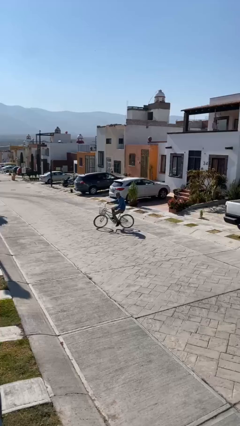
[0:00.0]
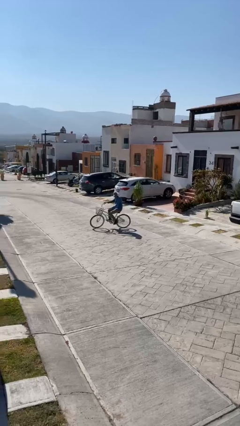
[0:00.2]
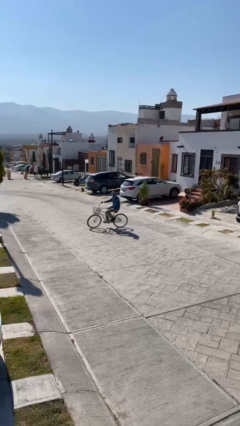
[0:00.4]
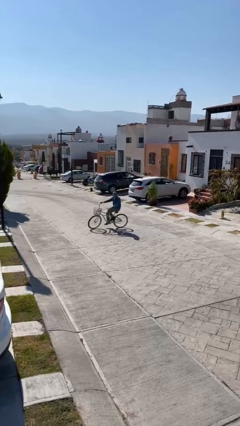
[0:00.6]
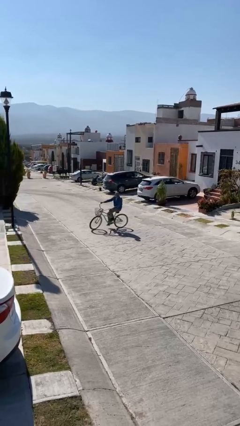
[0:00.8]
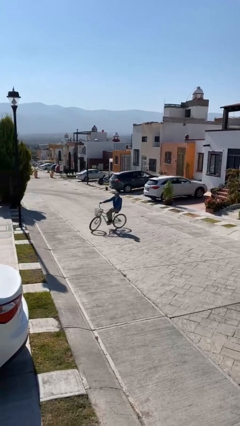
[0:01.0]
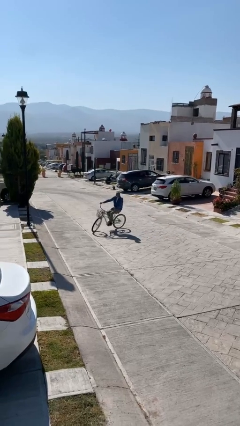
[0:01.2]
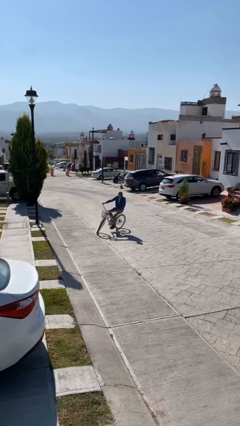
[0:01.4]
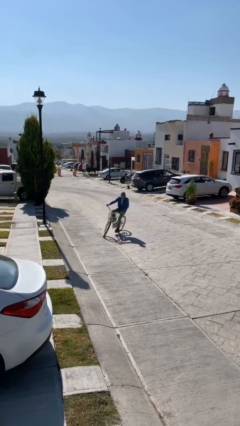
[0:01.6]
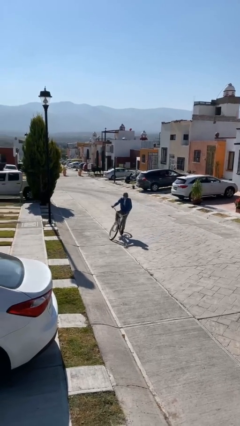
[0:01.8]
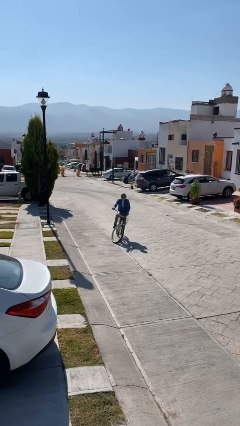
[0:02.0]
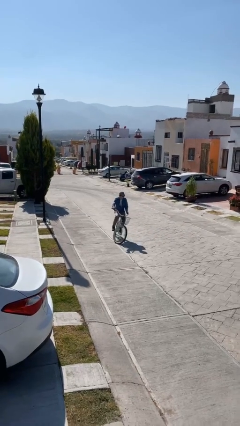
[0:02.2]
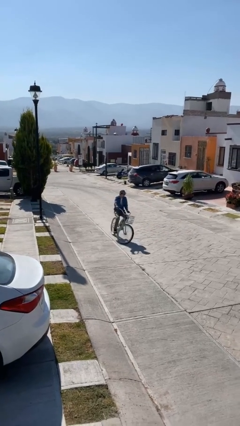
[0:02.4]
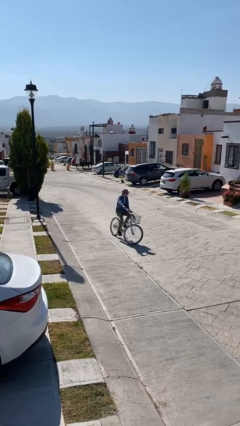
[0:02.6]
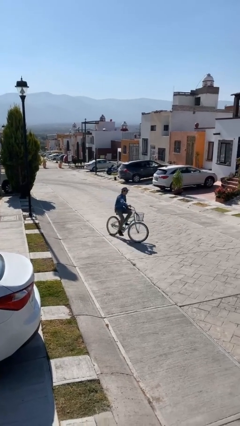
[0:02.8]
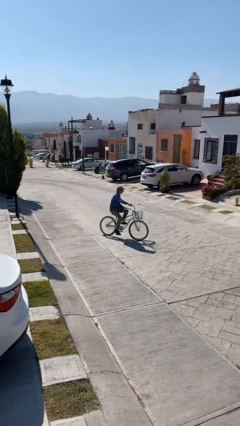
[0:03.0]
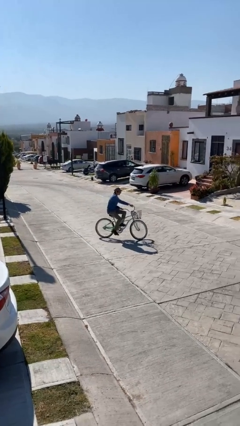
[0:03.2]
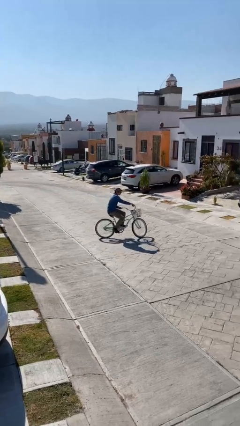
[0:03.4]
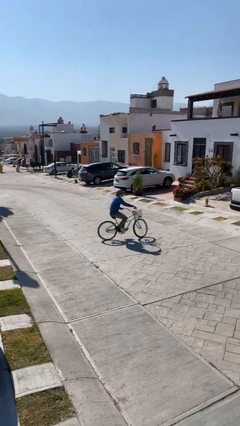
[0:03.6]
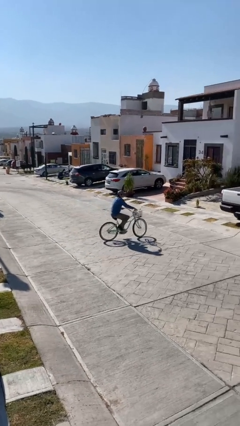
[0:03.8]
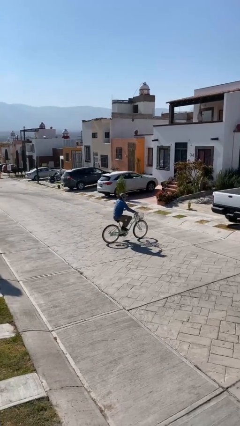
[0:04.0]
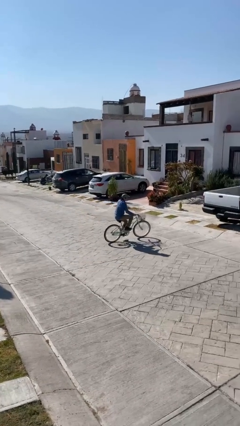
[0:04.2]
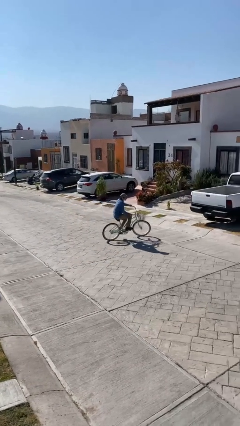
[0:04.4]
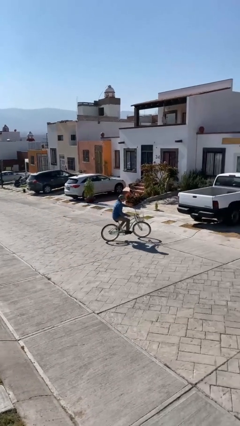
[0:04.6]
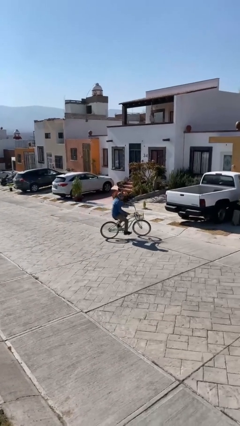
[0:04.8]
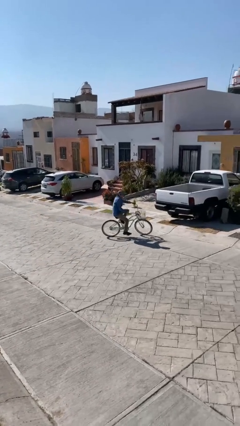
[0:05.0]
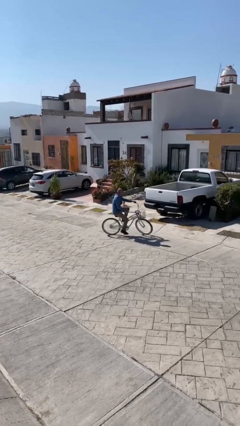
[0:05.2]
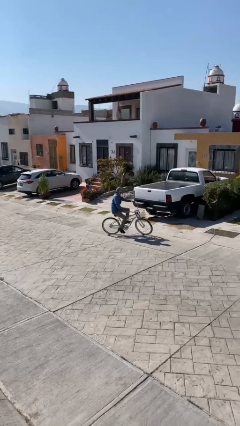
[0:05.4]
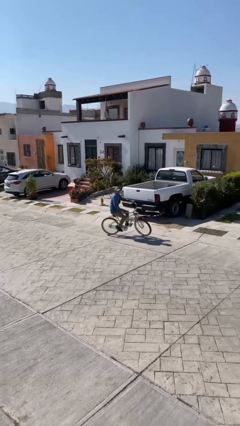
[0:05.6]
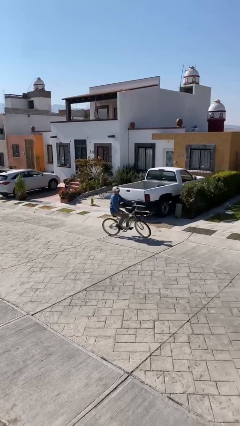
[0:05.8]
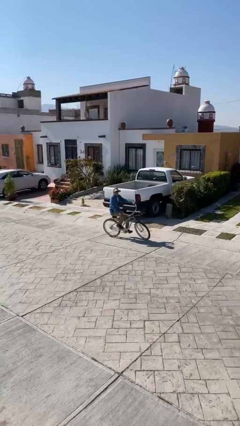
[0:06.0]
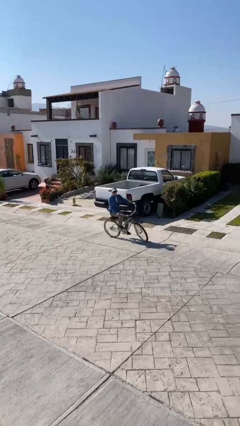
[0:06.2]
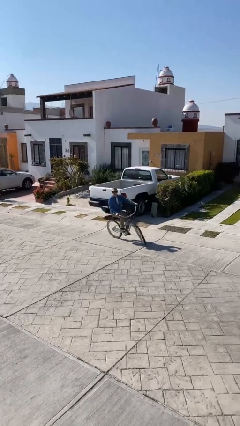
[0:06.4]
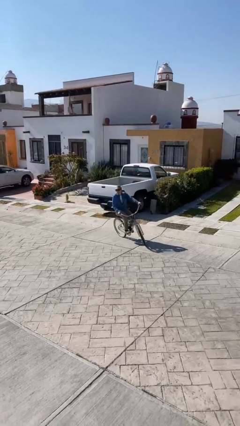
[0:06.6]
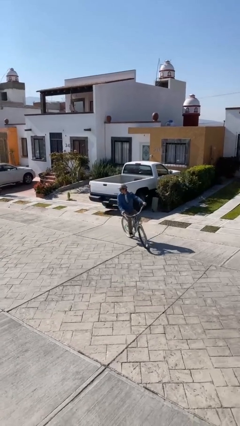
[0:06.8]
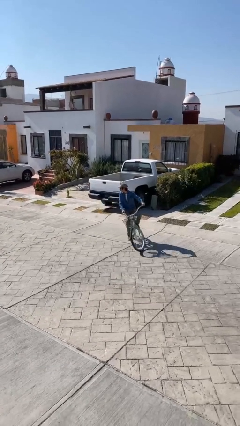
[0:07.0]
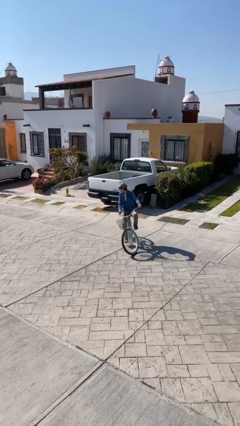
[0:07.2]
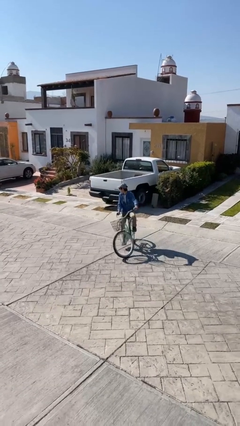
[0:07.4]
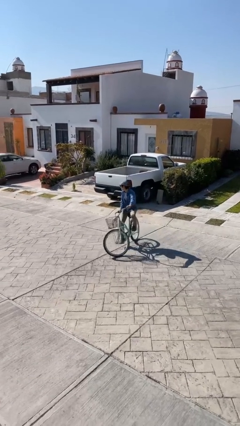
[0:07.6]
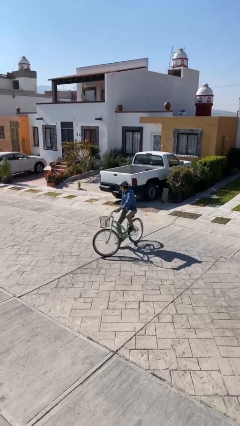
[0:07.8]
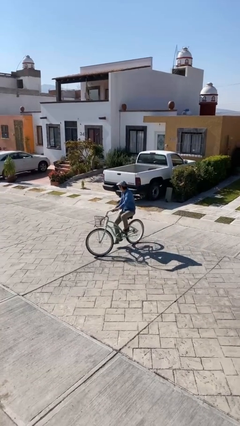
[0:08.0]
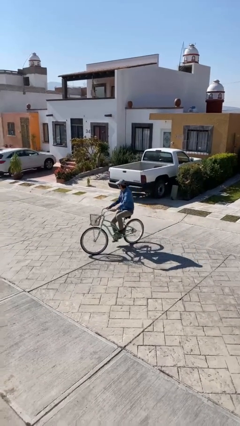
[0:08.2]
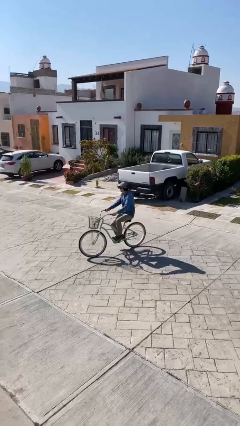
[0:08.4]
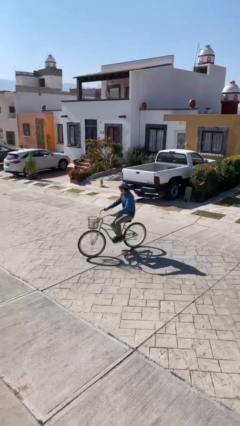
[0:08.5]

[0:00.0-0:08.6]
person rides bicycle

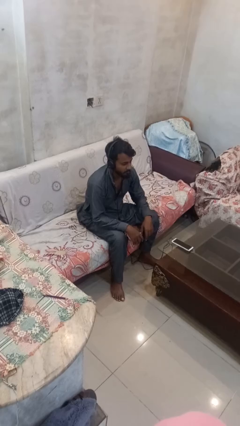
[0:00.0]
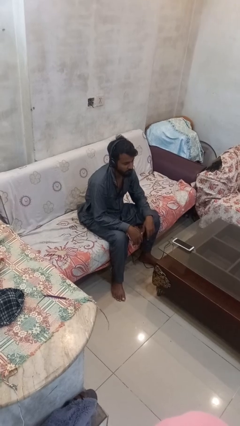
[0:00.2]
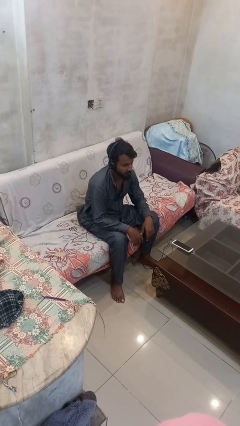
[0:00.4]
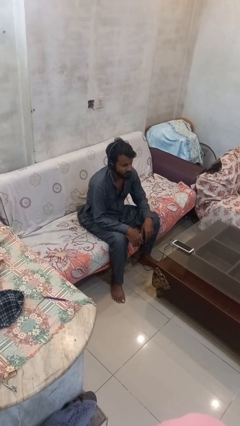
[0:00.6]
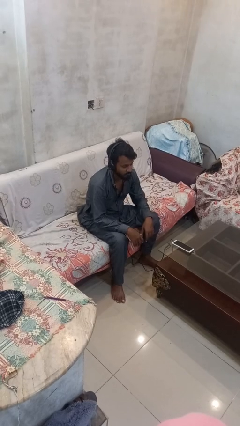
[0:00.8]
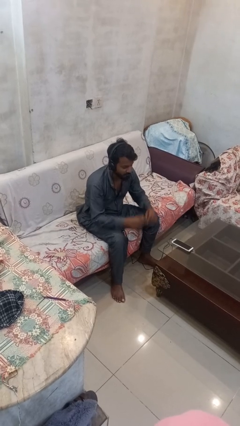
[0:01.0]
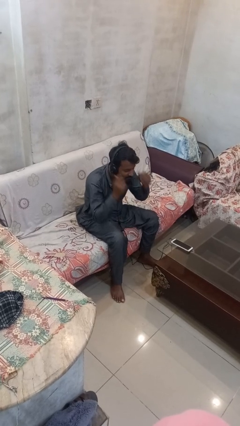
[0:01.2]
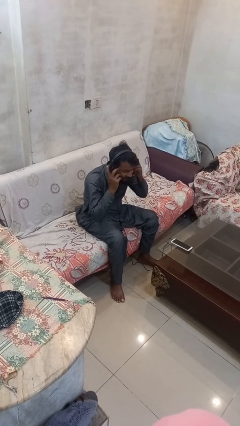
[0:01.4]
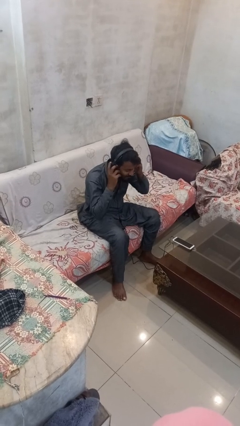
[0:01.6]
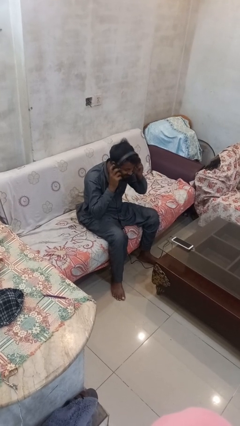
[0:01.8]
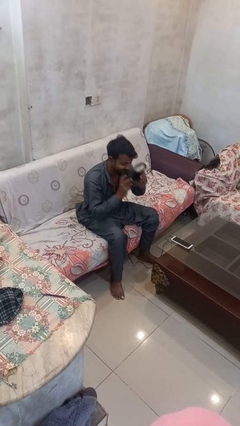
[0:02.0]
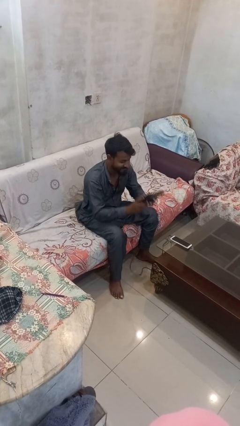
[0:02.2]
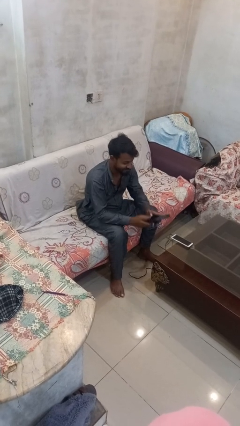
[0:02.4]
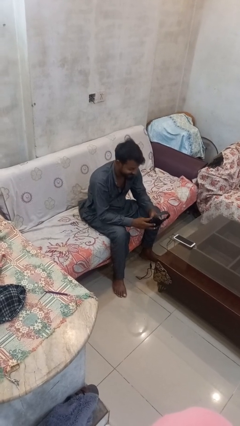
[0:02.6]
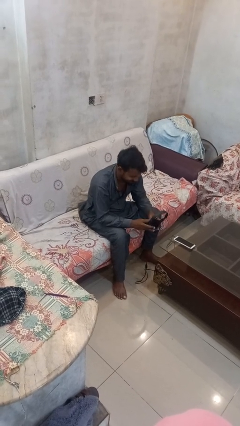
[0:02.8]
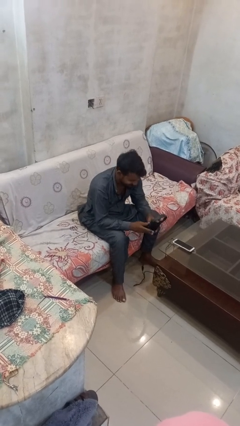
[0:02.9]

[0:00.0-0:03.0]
person takes off headphones

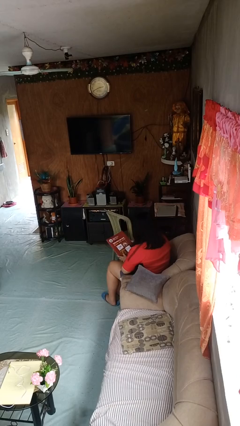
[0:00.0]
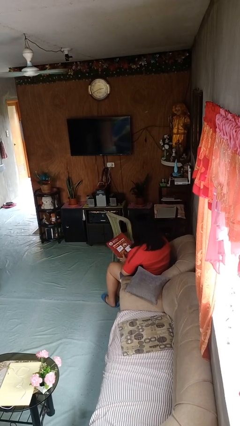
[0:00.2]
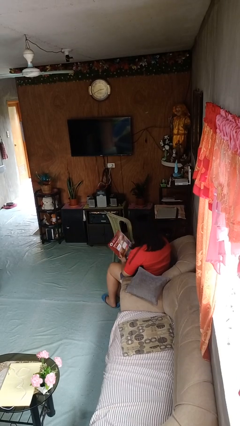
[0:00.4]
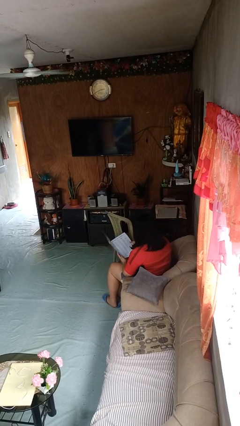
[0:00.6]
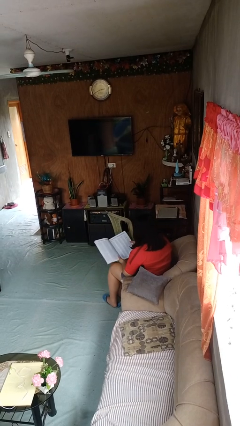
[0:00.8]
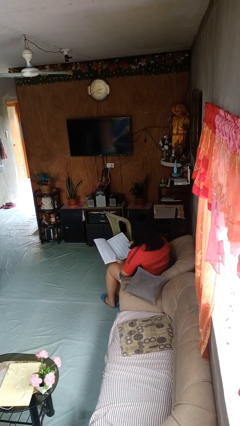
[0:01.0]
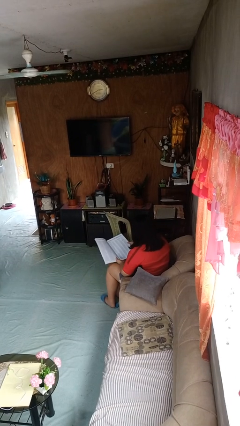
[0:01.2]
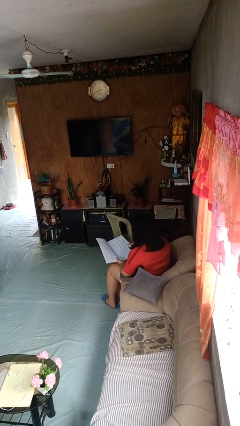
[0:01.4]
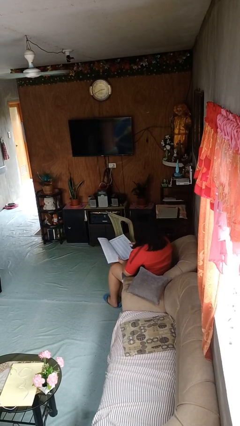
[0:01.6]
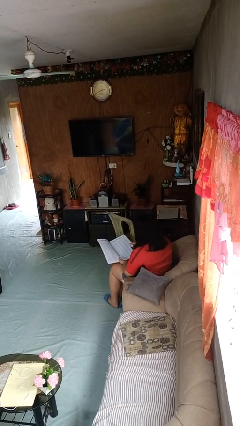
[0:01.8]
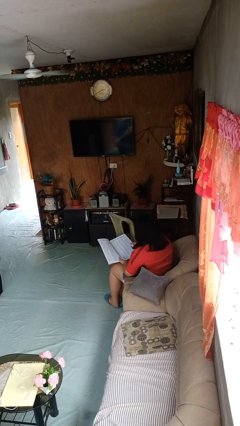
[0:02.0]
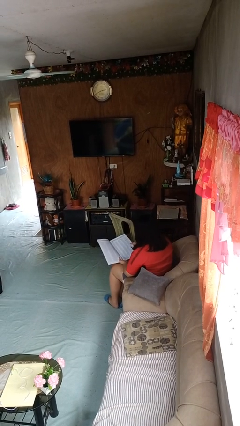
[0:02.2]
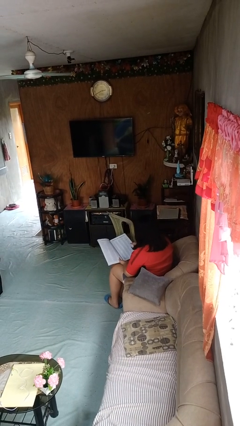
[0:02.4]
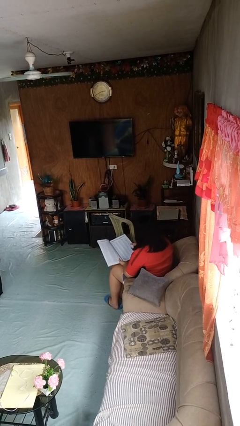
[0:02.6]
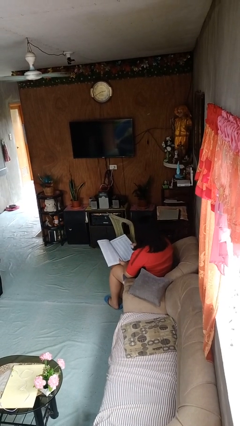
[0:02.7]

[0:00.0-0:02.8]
person reads magazine

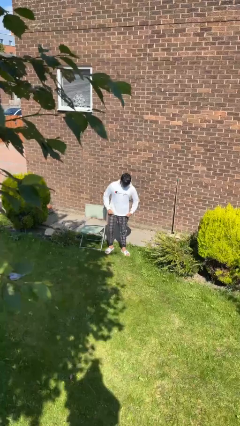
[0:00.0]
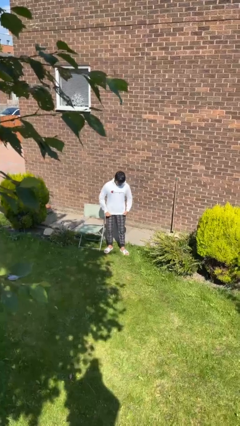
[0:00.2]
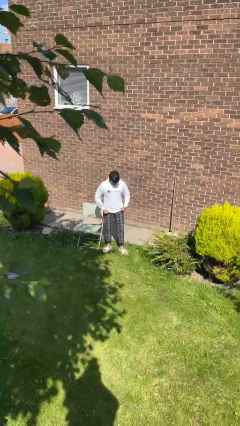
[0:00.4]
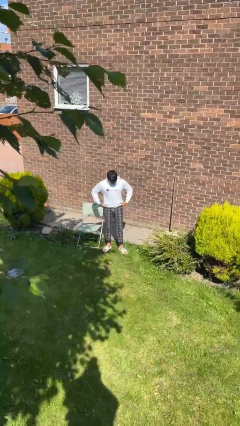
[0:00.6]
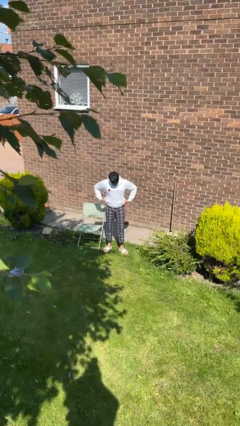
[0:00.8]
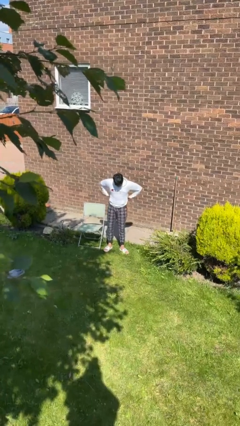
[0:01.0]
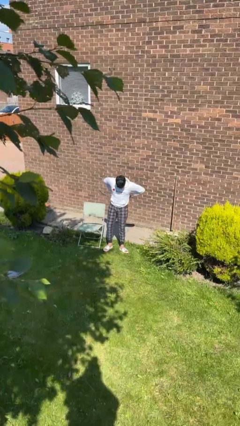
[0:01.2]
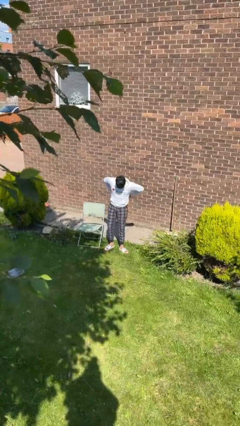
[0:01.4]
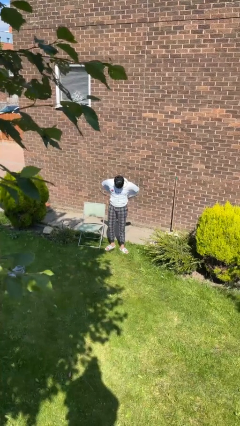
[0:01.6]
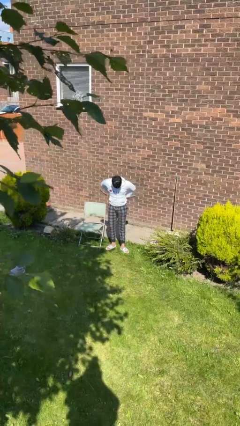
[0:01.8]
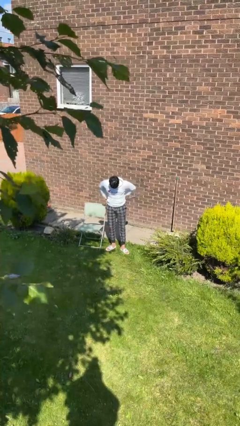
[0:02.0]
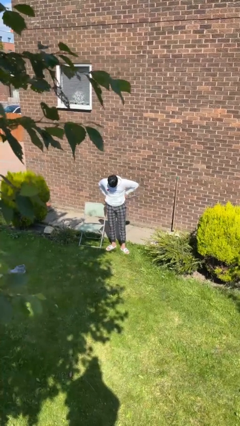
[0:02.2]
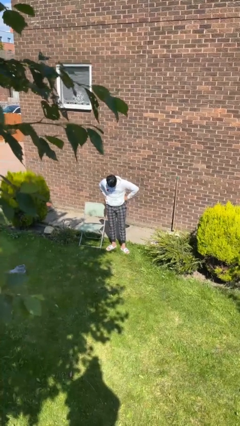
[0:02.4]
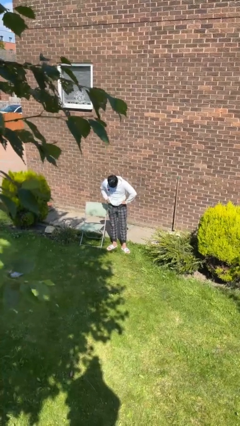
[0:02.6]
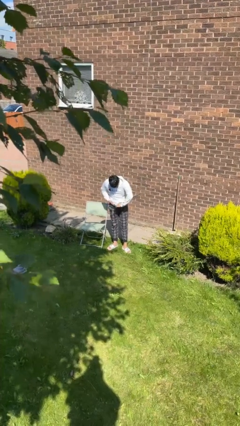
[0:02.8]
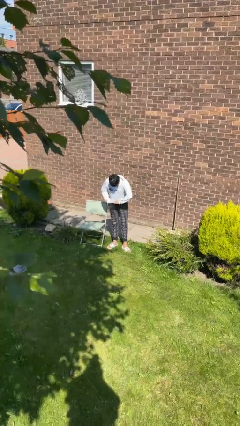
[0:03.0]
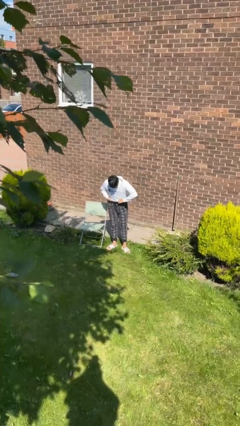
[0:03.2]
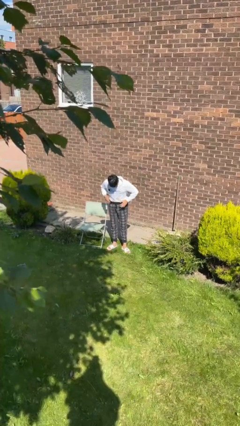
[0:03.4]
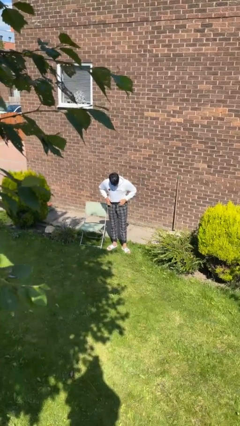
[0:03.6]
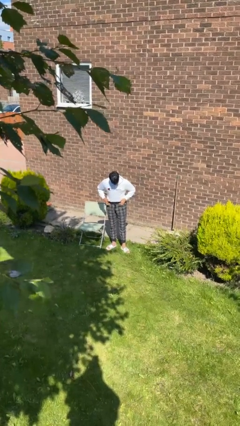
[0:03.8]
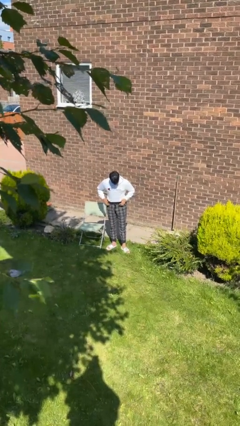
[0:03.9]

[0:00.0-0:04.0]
person tucks in shirt
